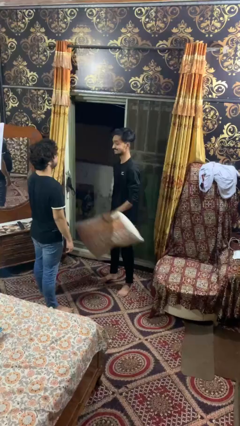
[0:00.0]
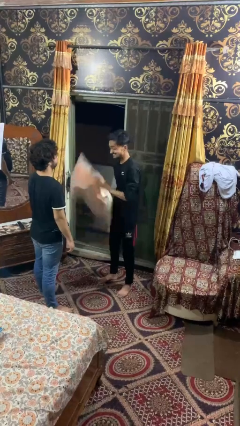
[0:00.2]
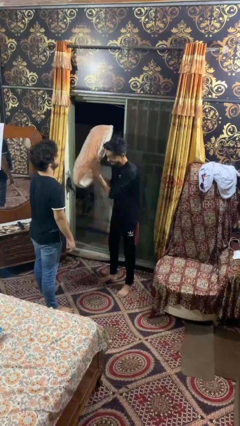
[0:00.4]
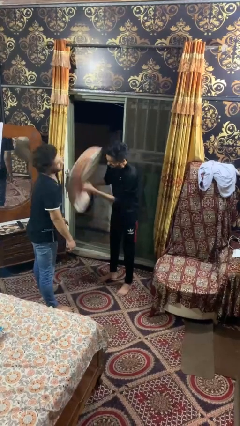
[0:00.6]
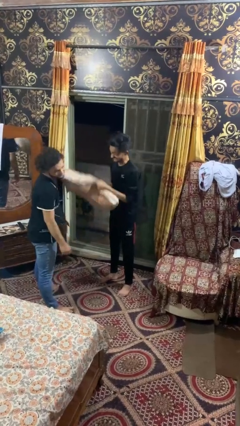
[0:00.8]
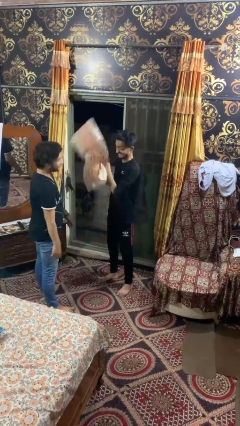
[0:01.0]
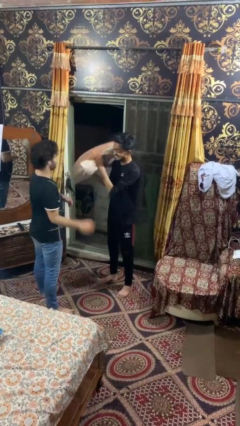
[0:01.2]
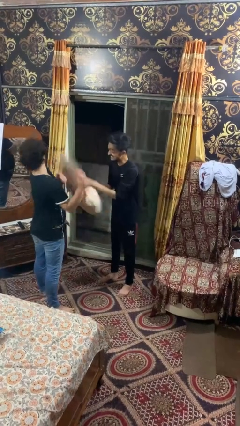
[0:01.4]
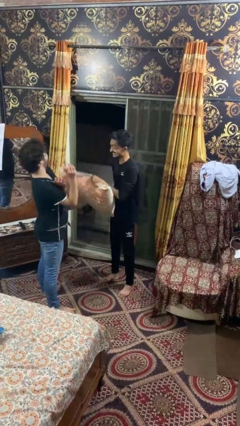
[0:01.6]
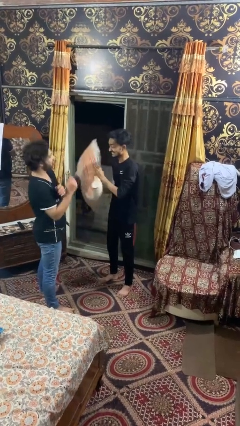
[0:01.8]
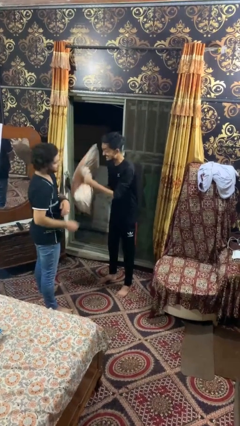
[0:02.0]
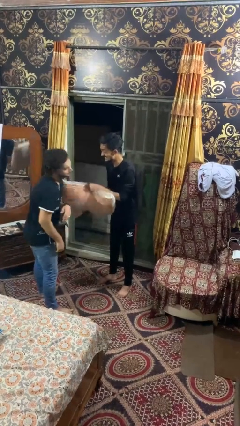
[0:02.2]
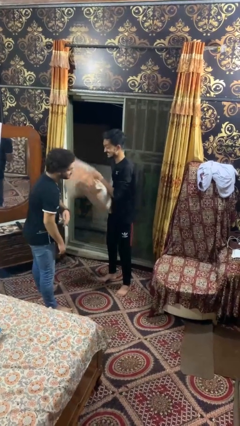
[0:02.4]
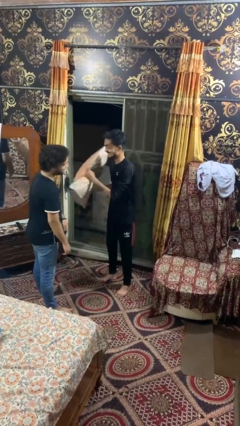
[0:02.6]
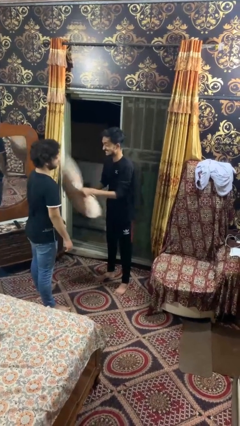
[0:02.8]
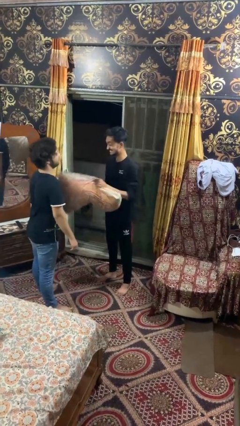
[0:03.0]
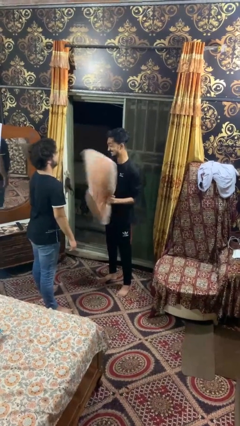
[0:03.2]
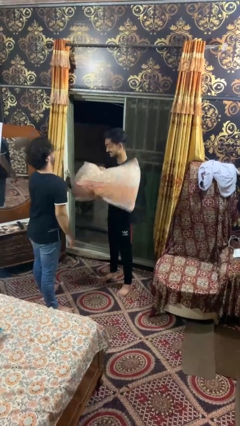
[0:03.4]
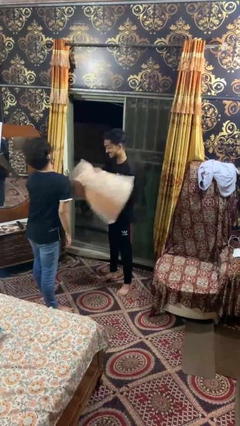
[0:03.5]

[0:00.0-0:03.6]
person hits person with pillow

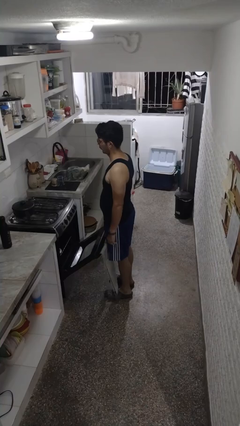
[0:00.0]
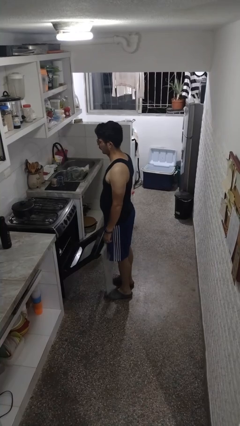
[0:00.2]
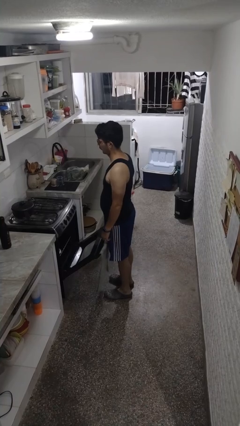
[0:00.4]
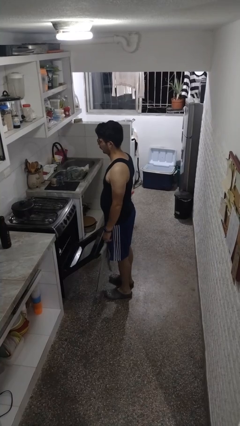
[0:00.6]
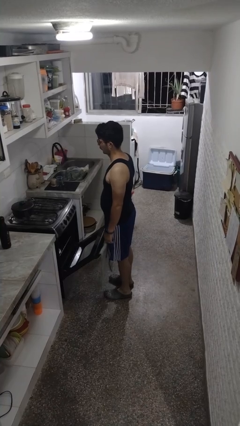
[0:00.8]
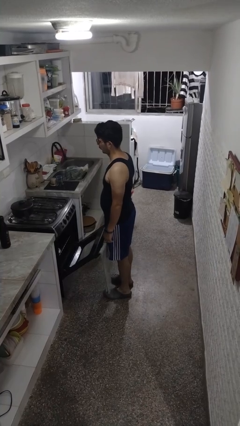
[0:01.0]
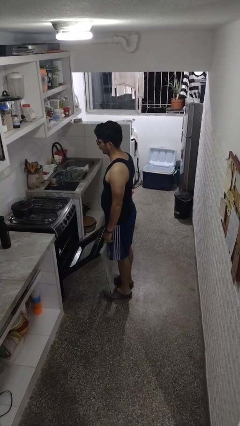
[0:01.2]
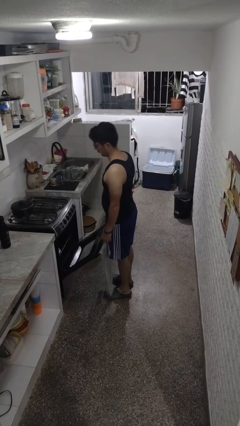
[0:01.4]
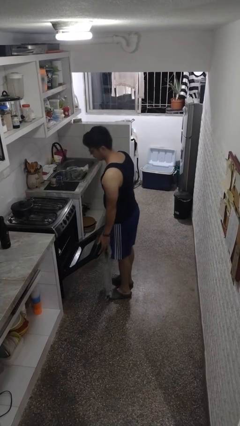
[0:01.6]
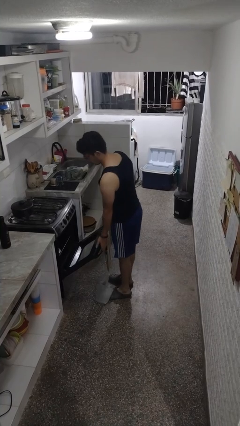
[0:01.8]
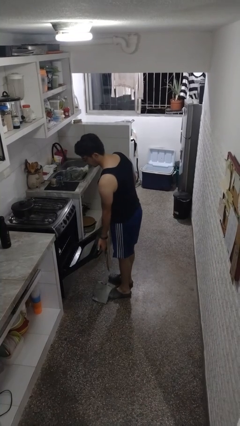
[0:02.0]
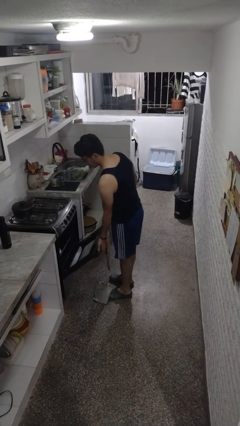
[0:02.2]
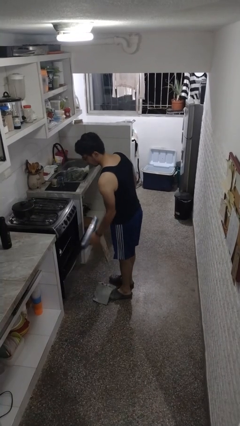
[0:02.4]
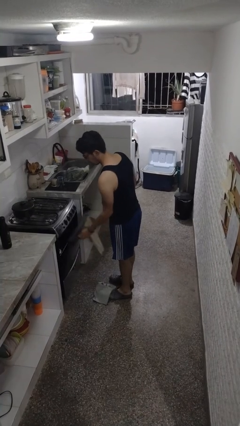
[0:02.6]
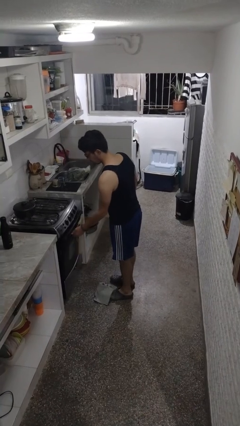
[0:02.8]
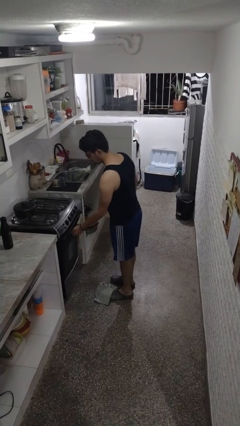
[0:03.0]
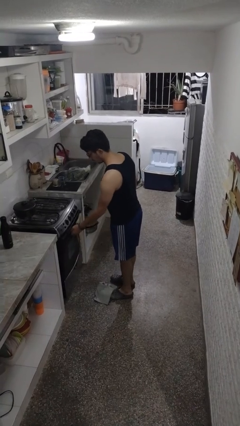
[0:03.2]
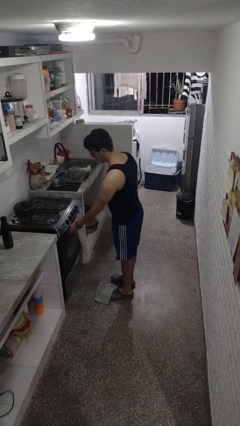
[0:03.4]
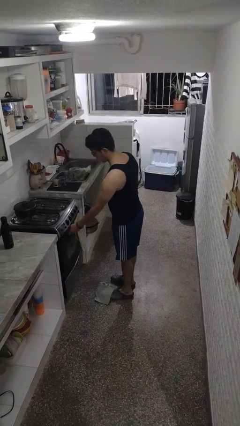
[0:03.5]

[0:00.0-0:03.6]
person closes oven door

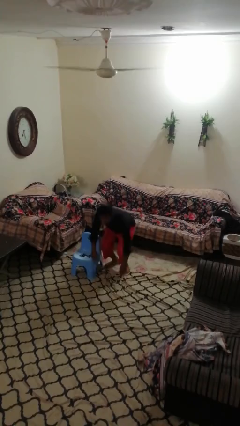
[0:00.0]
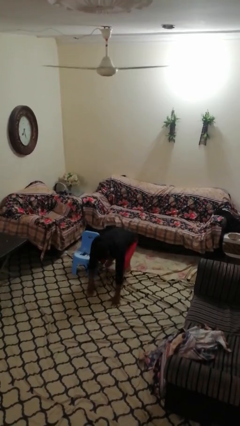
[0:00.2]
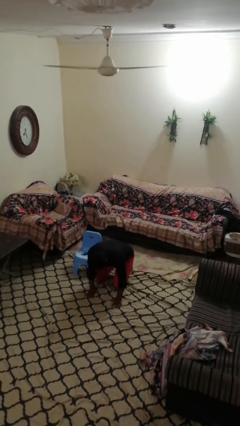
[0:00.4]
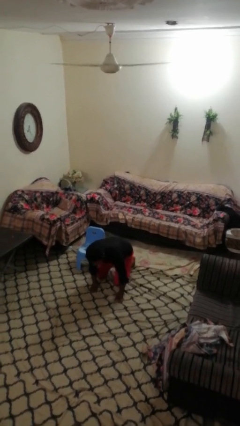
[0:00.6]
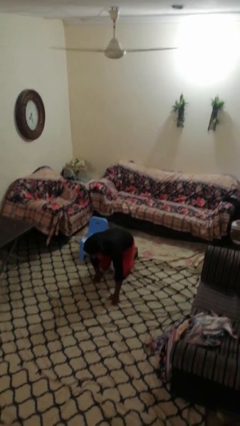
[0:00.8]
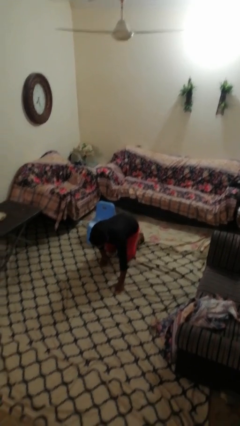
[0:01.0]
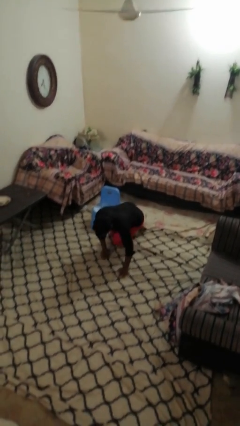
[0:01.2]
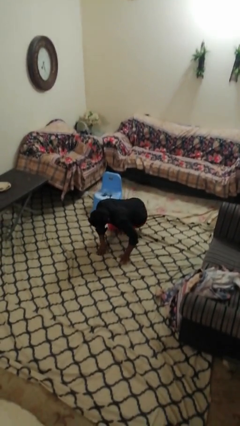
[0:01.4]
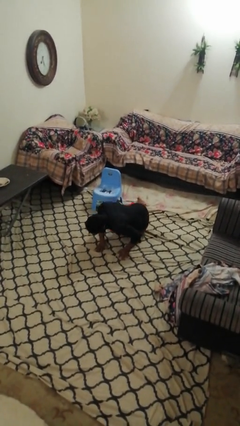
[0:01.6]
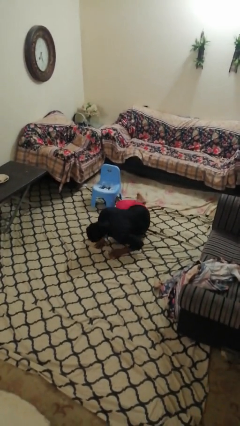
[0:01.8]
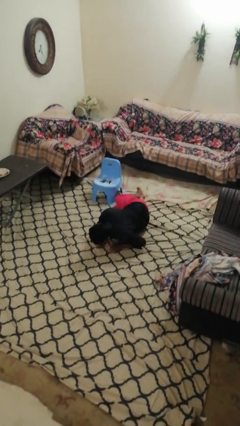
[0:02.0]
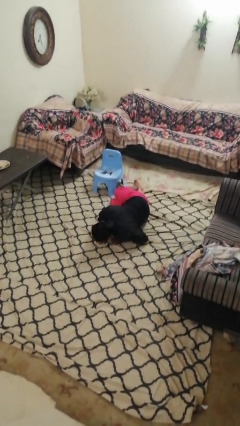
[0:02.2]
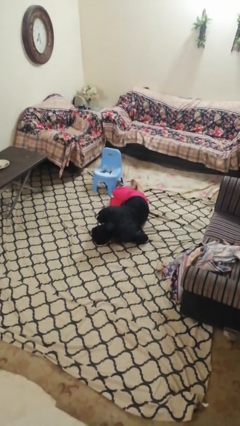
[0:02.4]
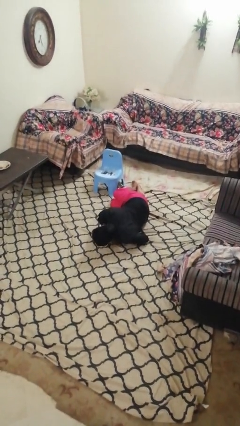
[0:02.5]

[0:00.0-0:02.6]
person lies down on floor

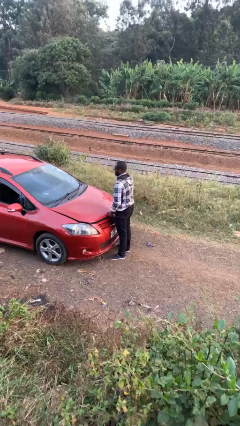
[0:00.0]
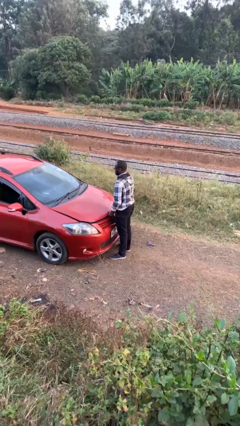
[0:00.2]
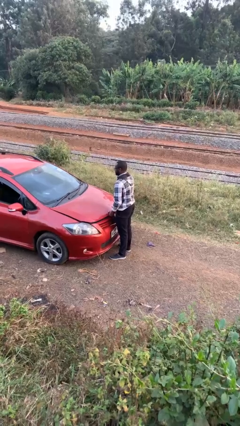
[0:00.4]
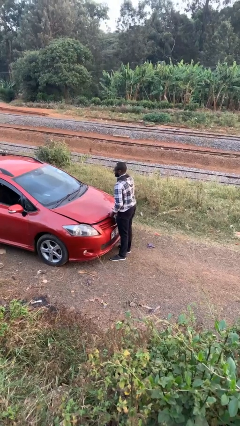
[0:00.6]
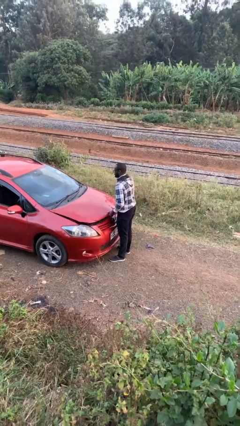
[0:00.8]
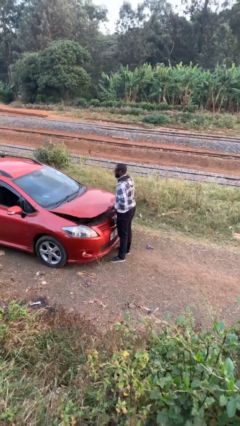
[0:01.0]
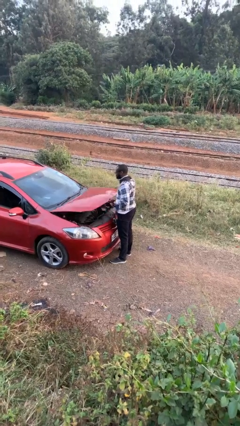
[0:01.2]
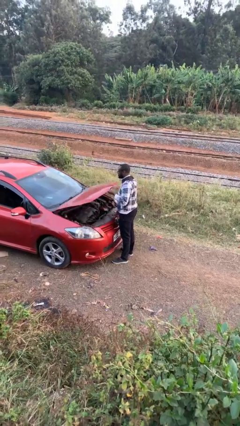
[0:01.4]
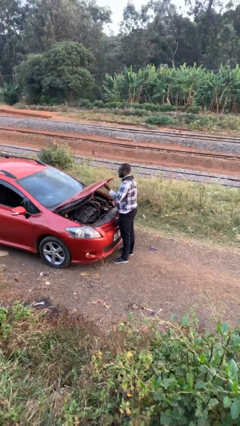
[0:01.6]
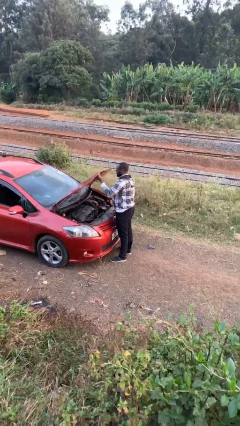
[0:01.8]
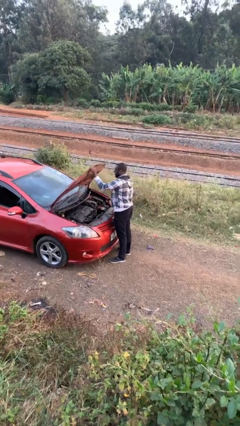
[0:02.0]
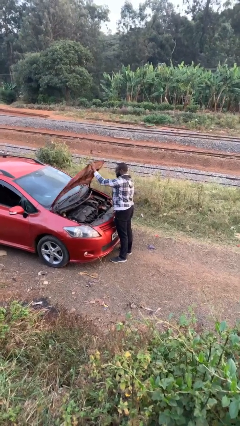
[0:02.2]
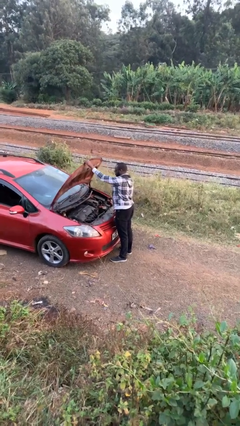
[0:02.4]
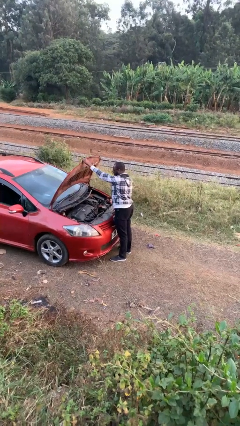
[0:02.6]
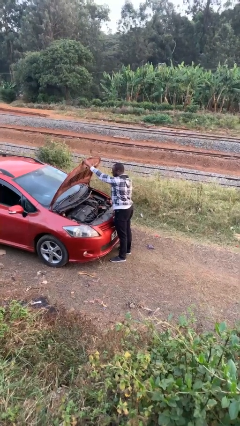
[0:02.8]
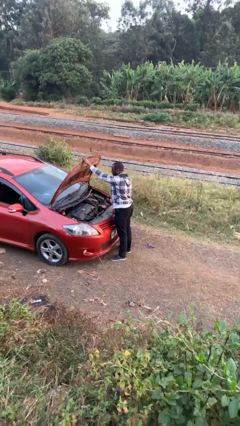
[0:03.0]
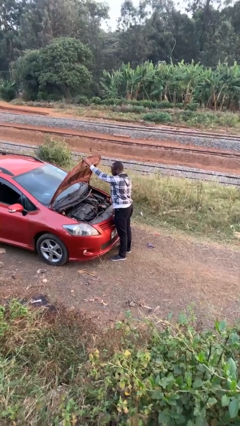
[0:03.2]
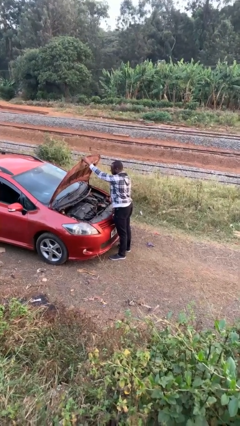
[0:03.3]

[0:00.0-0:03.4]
person opens car hood

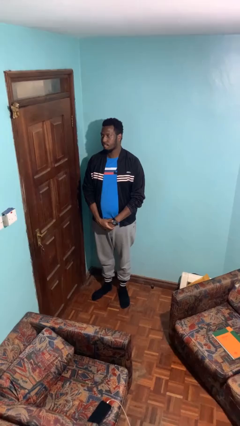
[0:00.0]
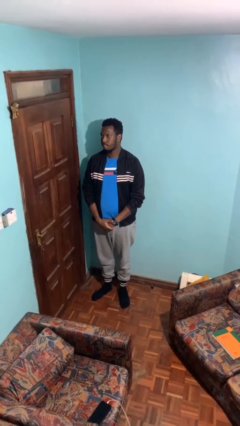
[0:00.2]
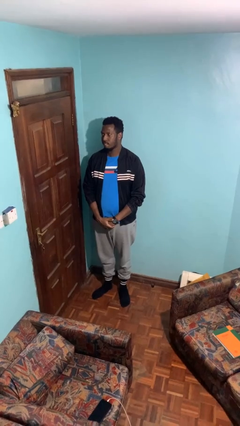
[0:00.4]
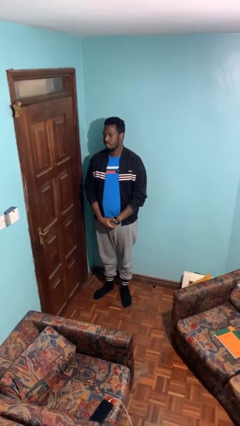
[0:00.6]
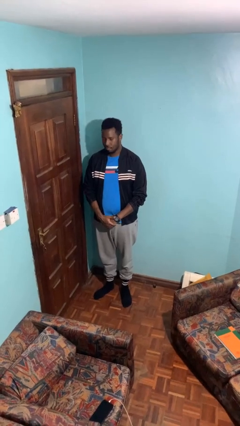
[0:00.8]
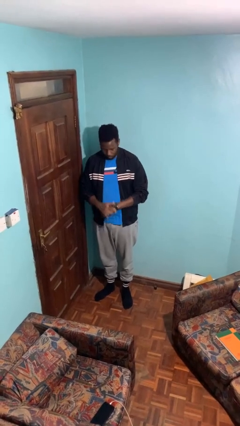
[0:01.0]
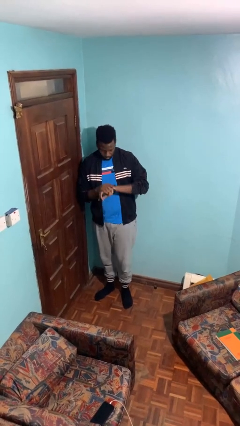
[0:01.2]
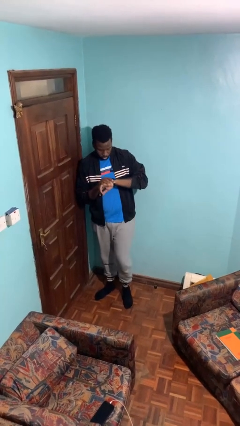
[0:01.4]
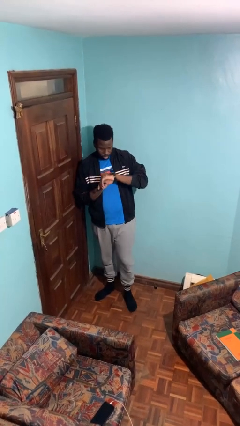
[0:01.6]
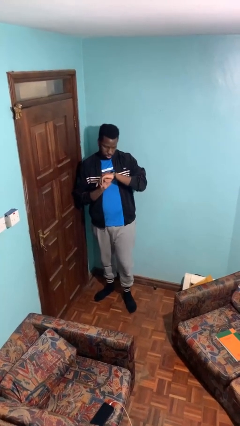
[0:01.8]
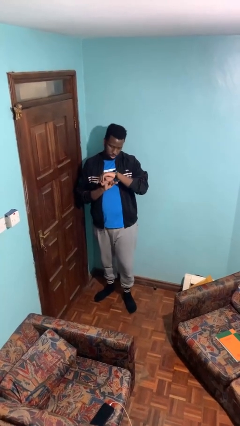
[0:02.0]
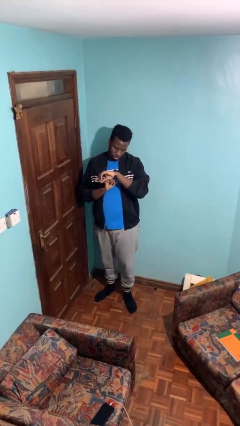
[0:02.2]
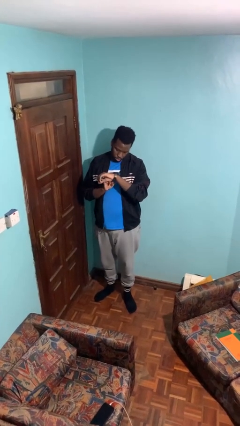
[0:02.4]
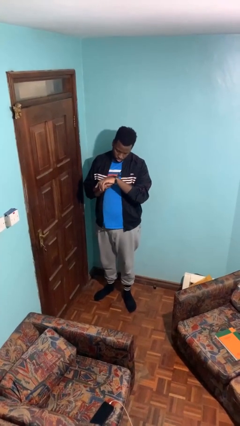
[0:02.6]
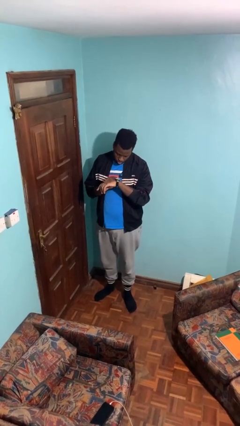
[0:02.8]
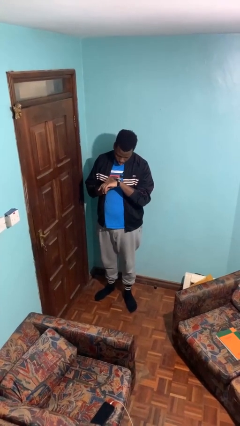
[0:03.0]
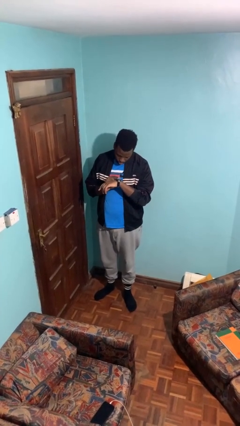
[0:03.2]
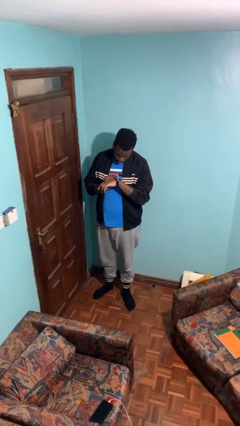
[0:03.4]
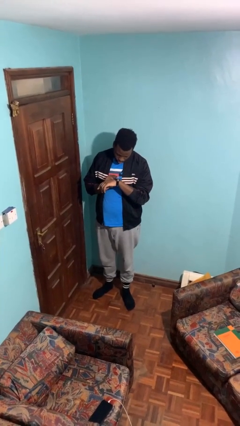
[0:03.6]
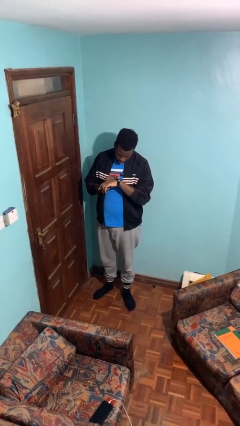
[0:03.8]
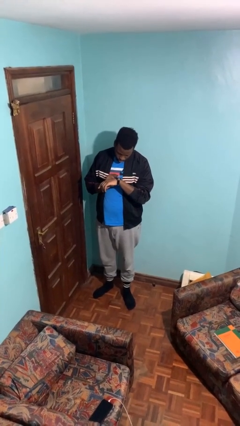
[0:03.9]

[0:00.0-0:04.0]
person looks at wristwatch

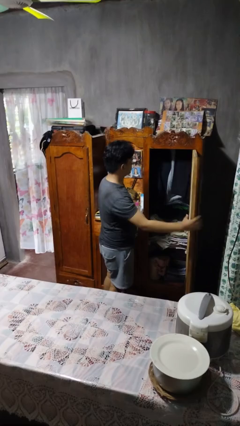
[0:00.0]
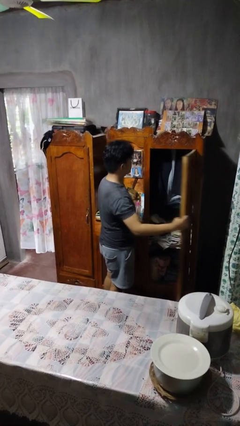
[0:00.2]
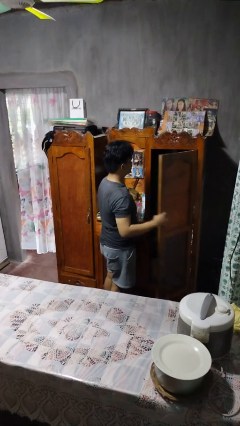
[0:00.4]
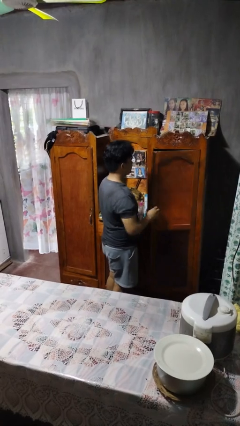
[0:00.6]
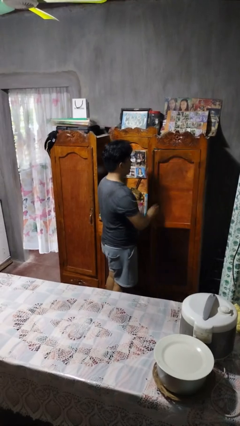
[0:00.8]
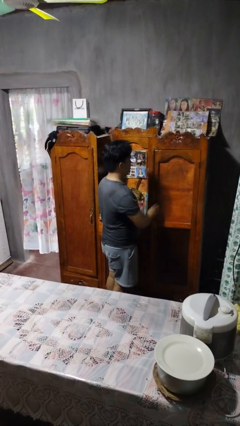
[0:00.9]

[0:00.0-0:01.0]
person closes closet door
